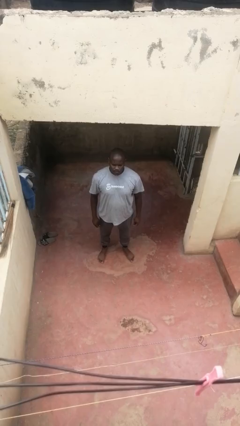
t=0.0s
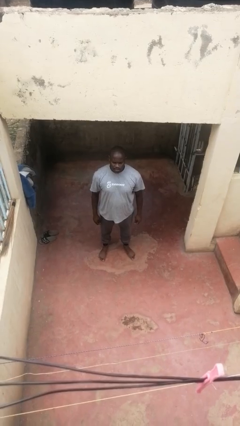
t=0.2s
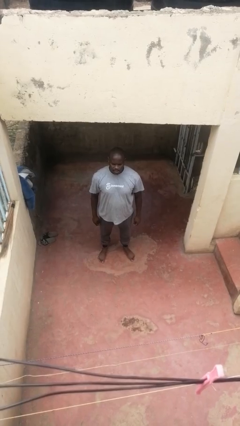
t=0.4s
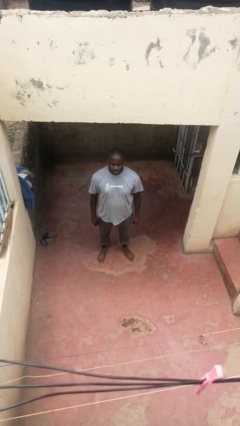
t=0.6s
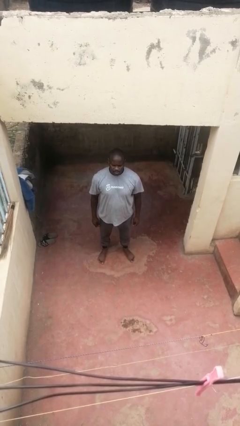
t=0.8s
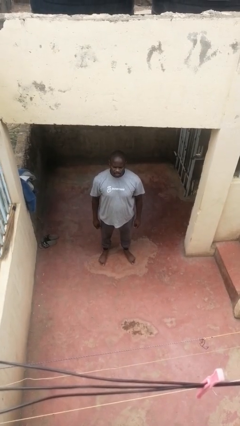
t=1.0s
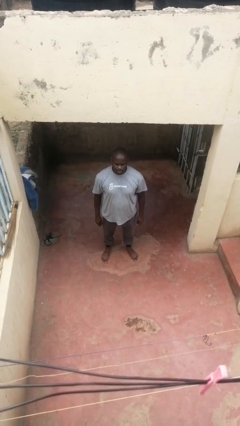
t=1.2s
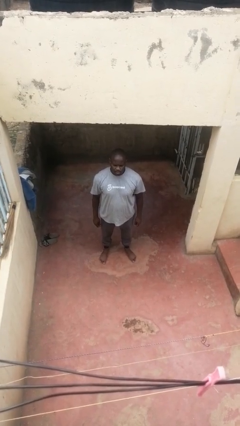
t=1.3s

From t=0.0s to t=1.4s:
person stands up

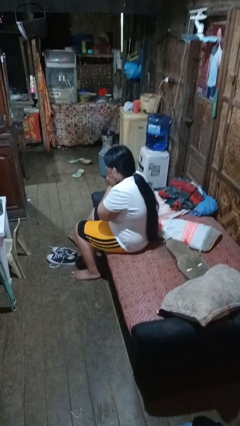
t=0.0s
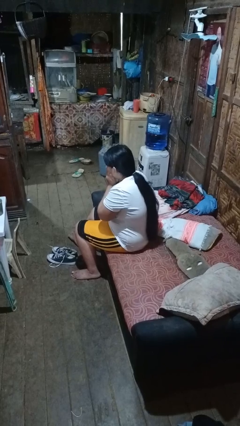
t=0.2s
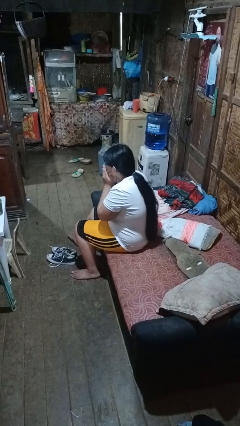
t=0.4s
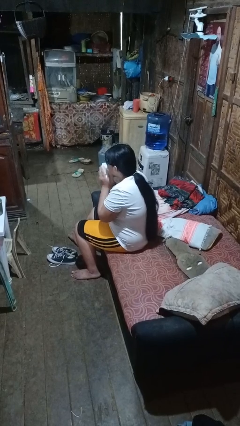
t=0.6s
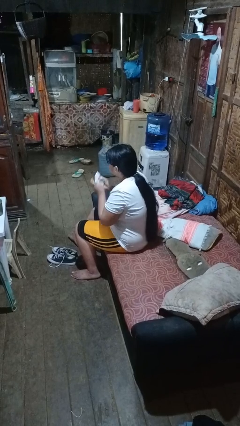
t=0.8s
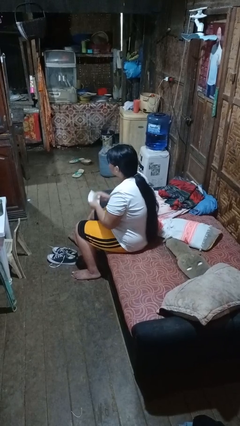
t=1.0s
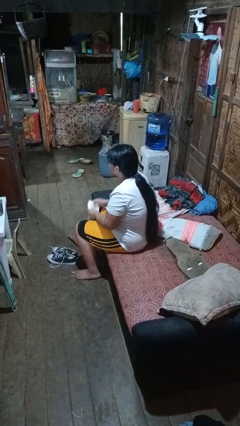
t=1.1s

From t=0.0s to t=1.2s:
person blows nose

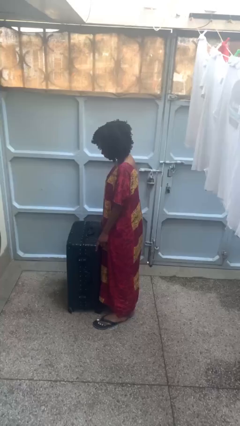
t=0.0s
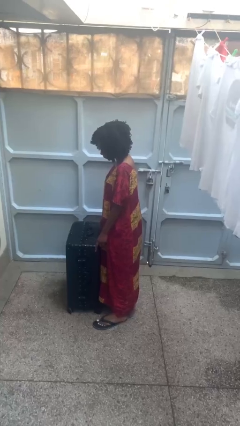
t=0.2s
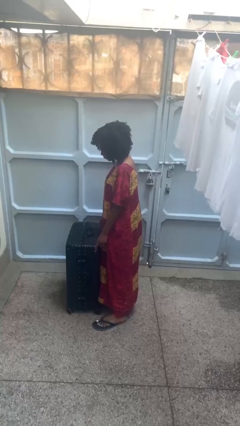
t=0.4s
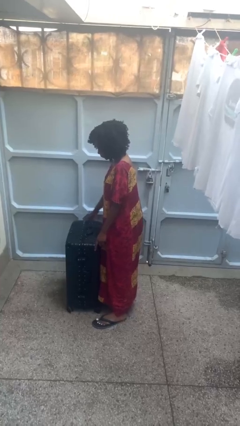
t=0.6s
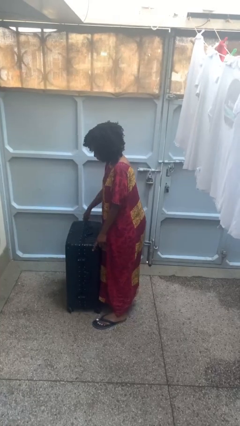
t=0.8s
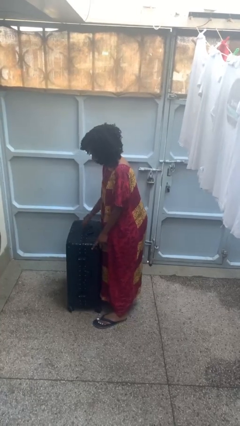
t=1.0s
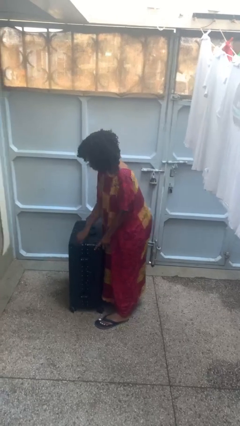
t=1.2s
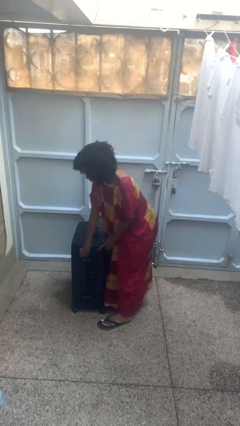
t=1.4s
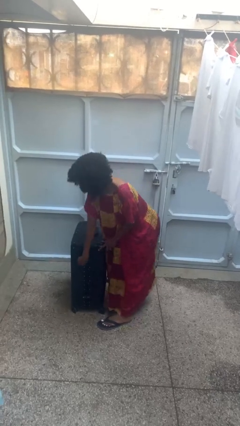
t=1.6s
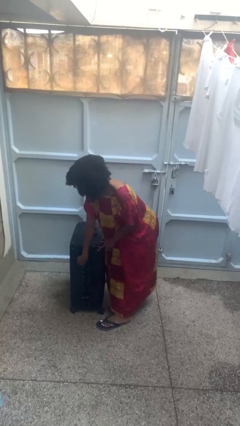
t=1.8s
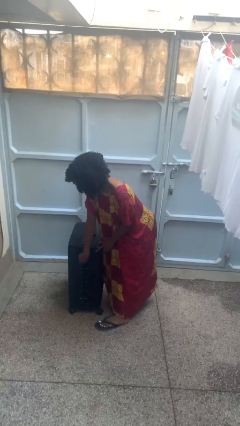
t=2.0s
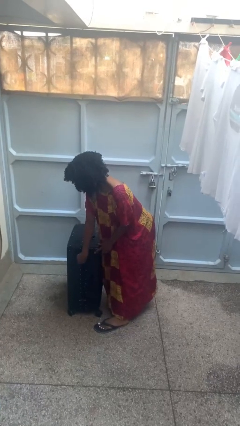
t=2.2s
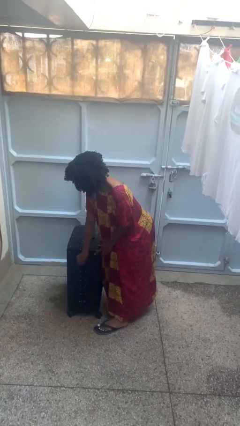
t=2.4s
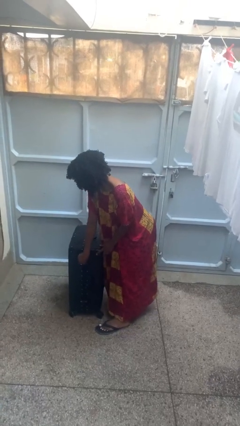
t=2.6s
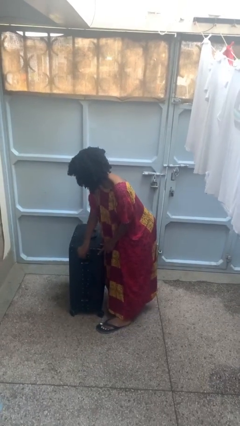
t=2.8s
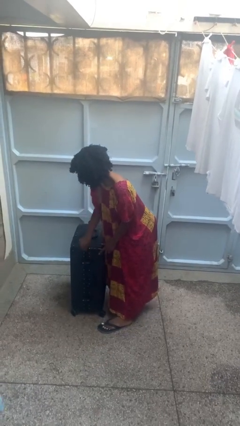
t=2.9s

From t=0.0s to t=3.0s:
person opens suitcase

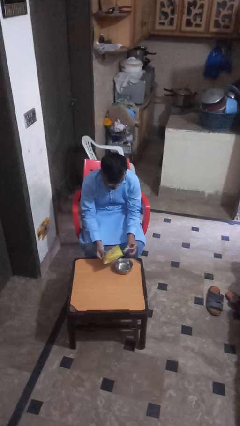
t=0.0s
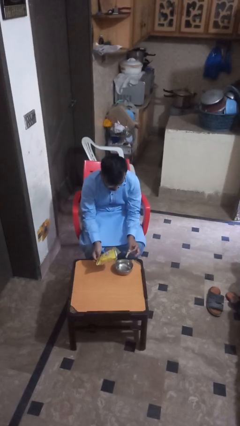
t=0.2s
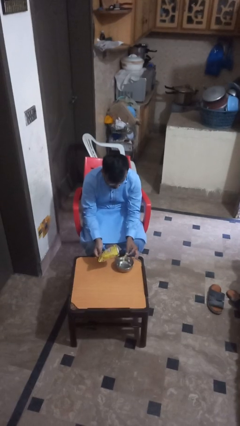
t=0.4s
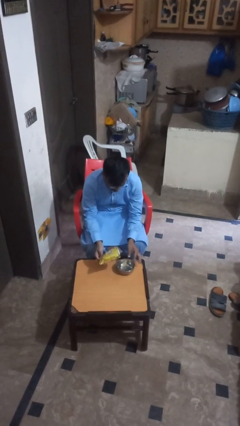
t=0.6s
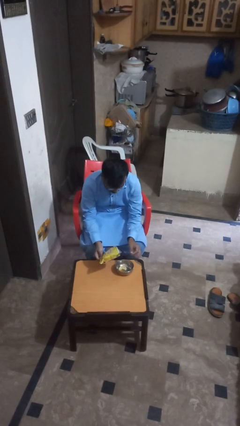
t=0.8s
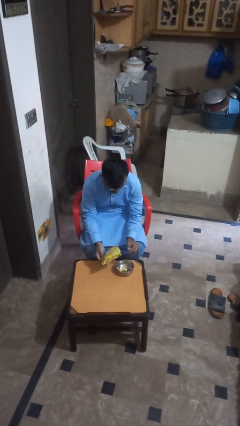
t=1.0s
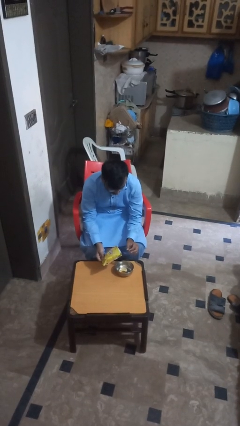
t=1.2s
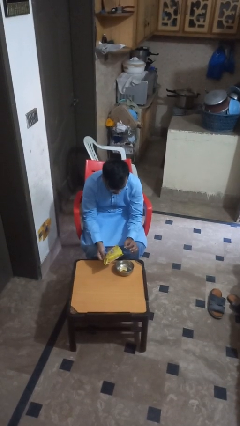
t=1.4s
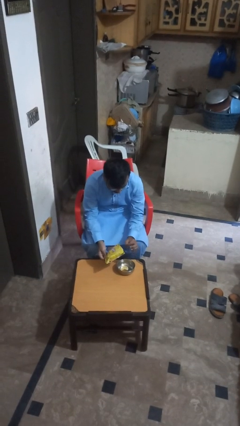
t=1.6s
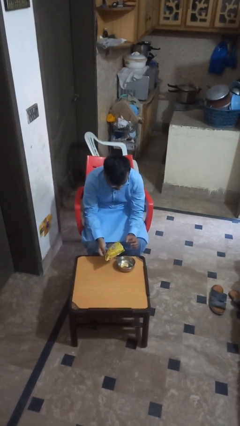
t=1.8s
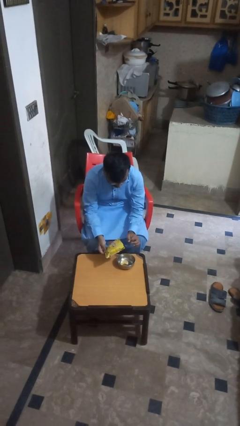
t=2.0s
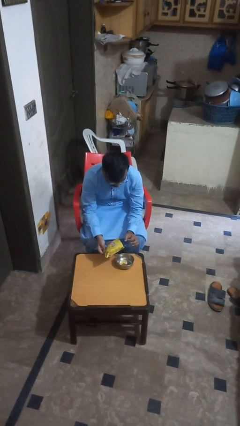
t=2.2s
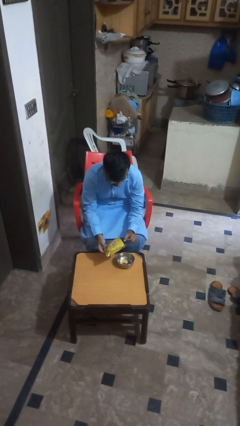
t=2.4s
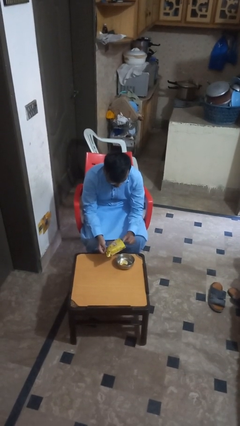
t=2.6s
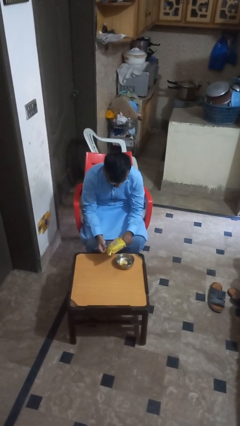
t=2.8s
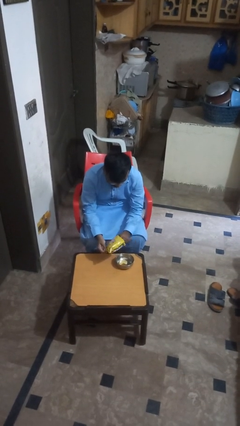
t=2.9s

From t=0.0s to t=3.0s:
person pours into bowl

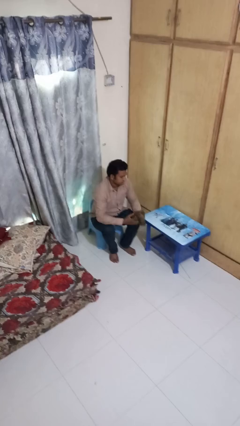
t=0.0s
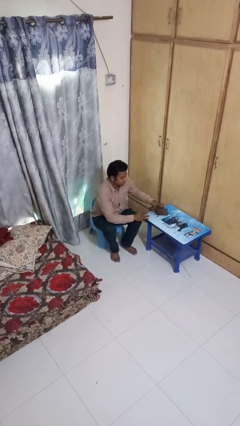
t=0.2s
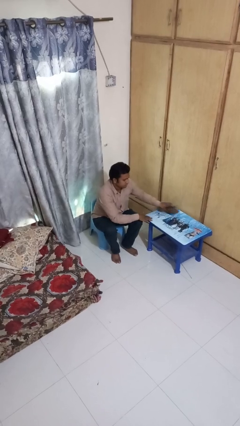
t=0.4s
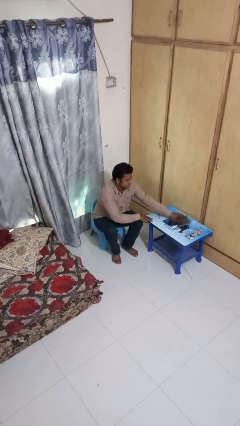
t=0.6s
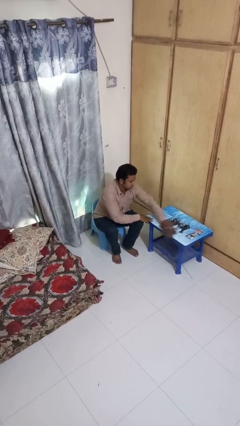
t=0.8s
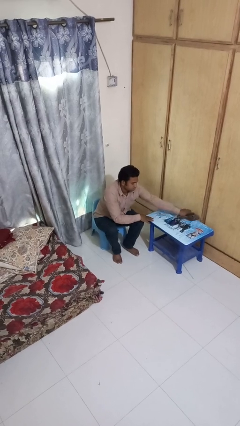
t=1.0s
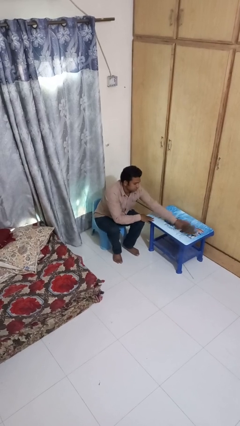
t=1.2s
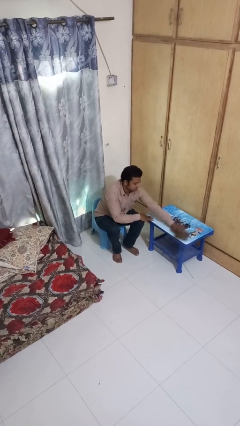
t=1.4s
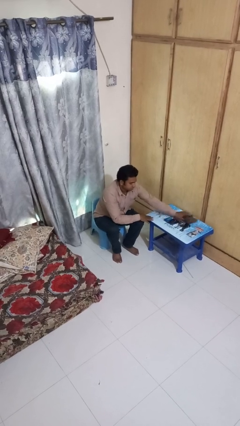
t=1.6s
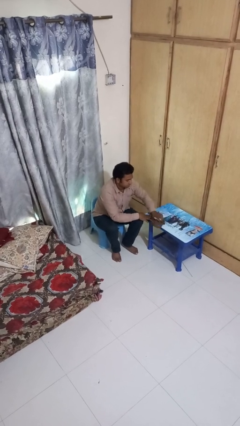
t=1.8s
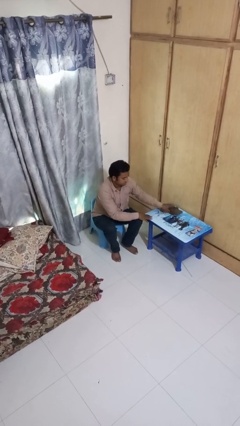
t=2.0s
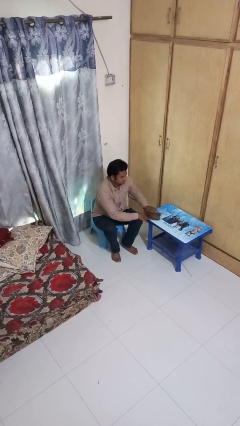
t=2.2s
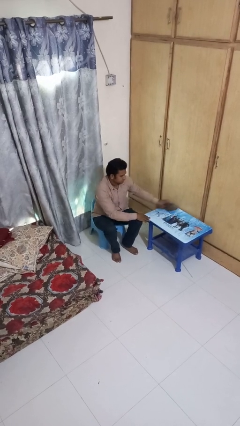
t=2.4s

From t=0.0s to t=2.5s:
person cleans table with rag

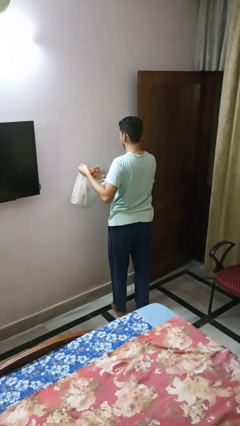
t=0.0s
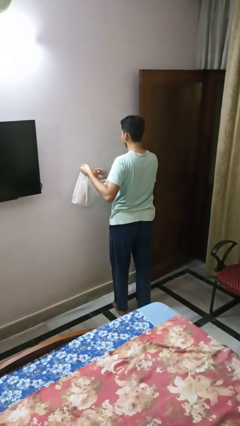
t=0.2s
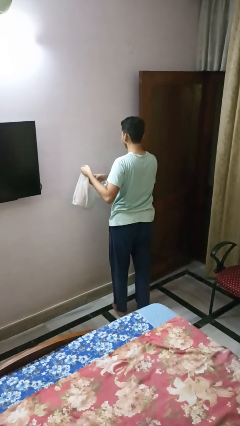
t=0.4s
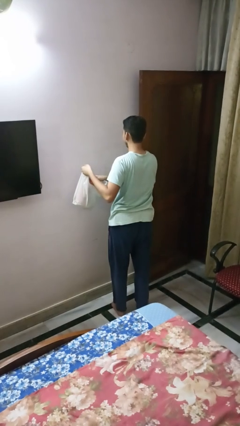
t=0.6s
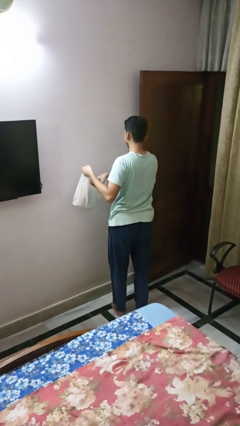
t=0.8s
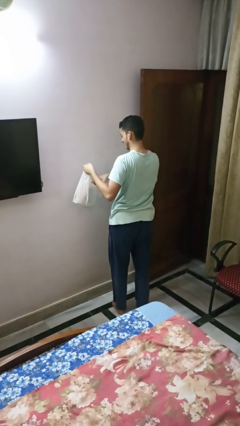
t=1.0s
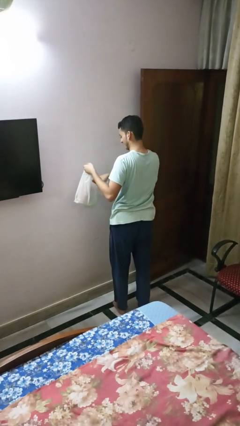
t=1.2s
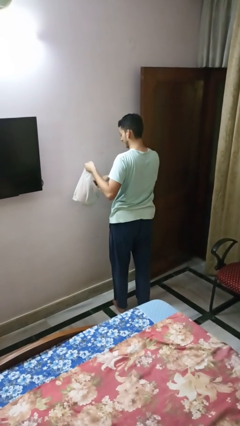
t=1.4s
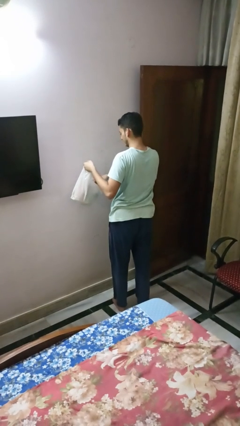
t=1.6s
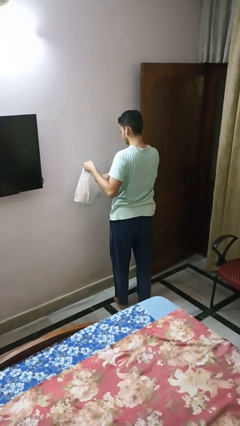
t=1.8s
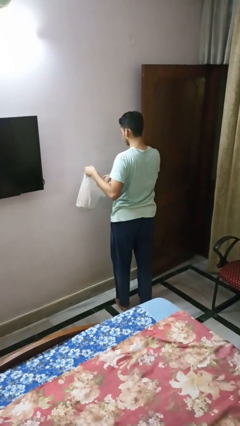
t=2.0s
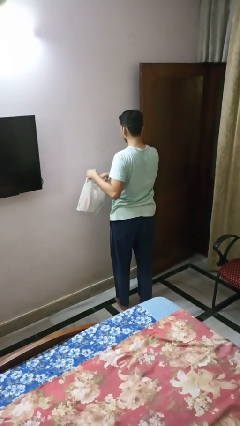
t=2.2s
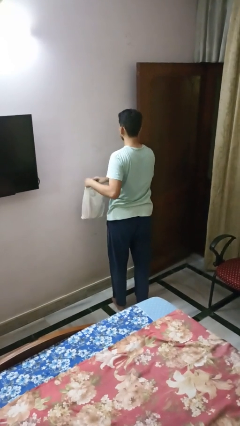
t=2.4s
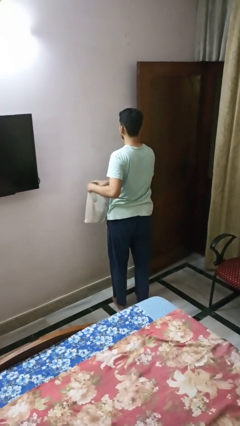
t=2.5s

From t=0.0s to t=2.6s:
person puts object into bag

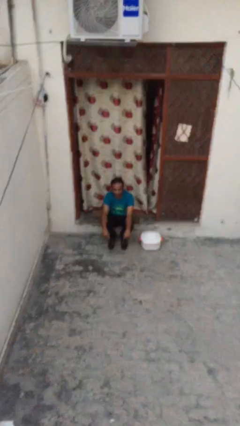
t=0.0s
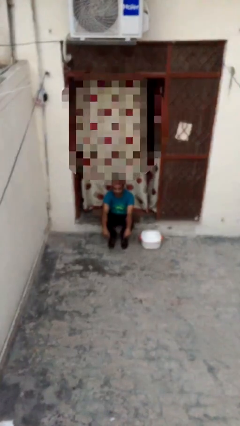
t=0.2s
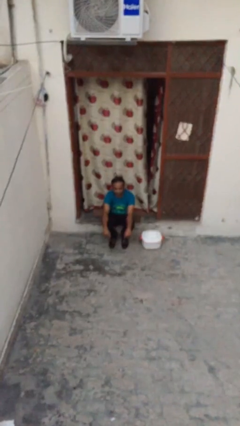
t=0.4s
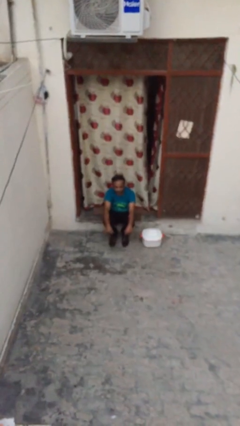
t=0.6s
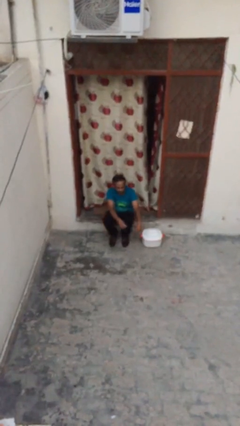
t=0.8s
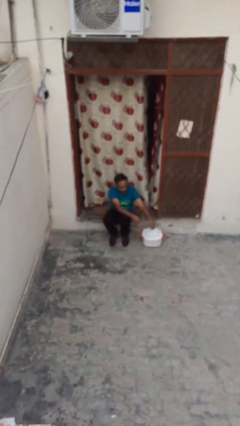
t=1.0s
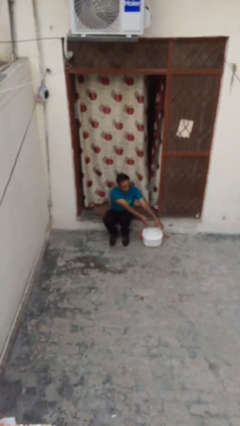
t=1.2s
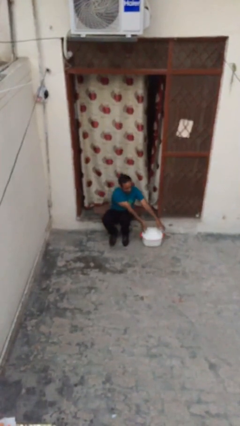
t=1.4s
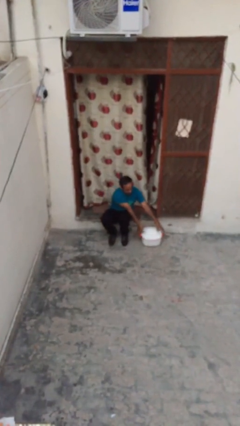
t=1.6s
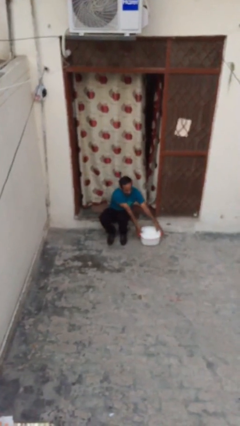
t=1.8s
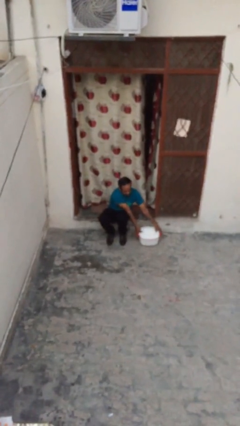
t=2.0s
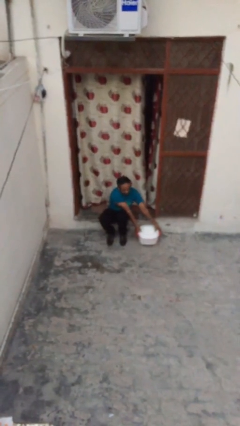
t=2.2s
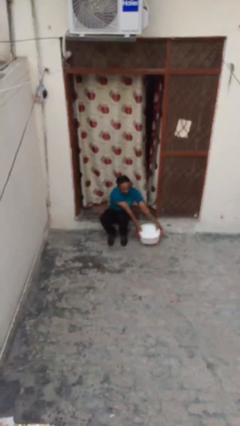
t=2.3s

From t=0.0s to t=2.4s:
person picks up object from floor

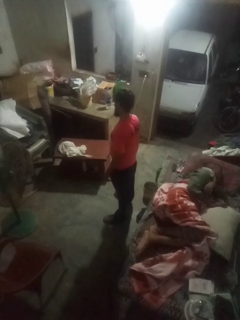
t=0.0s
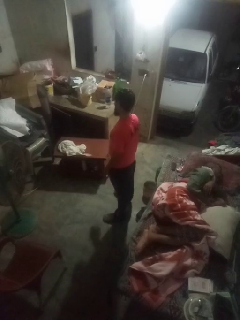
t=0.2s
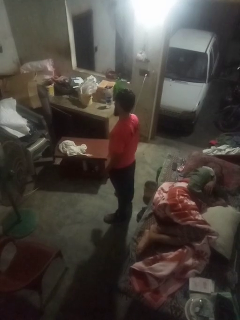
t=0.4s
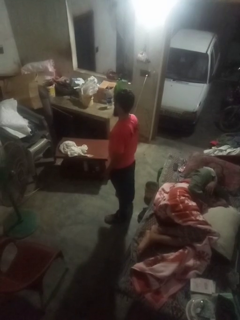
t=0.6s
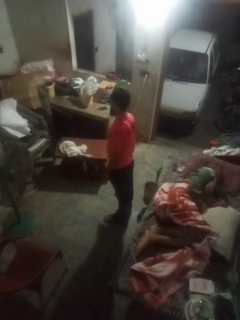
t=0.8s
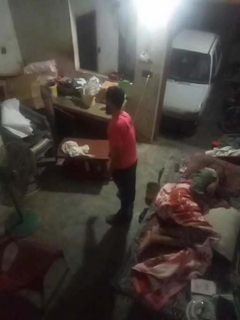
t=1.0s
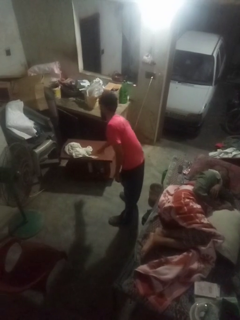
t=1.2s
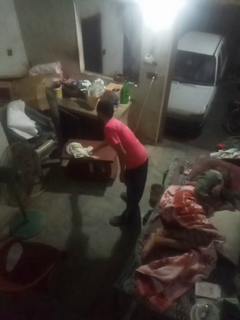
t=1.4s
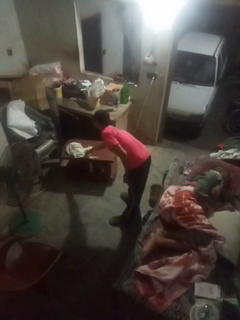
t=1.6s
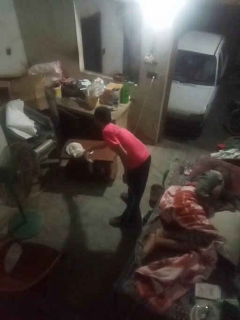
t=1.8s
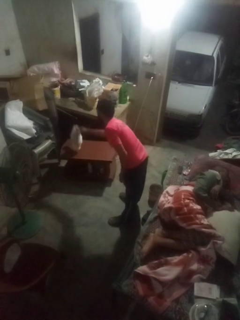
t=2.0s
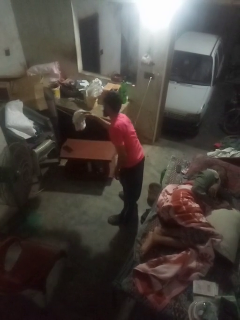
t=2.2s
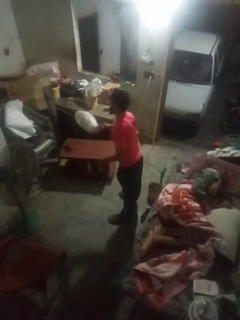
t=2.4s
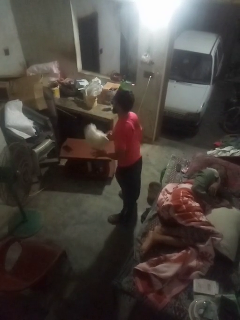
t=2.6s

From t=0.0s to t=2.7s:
person picks up object from table
